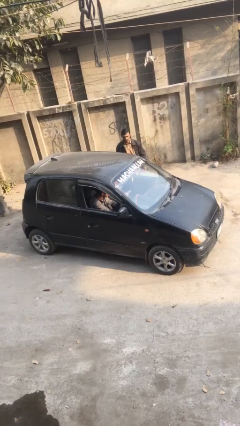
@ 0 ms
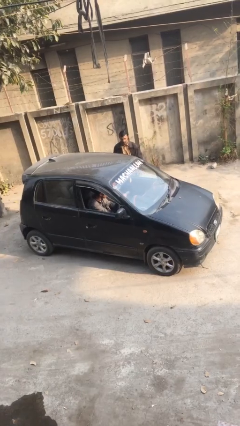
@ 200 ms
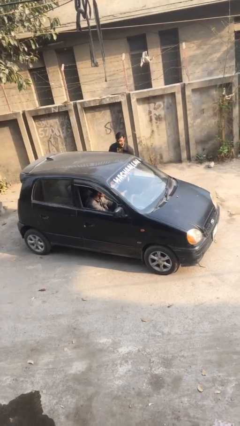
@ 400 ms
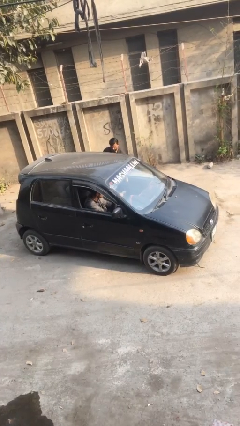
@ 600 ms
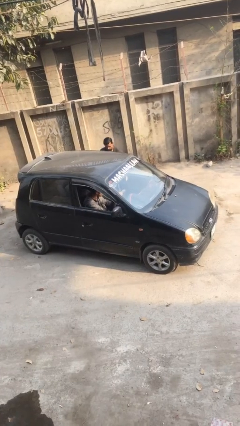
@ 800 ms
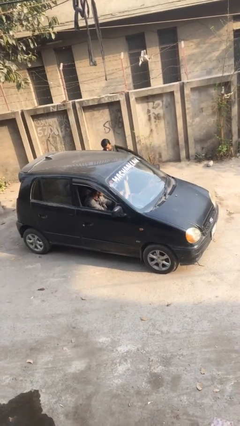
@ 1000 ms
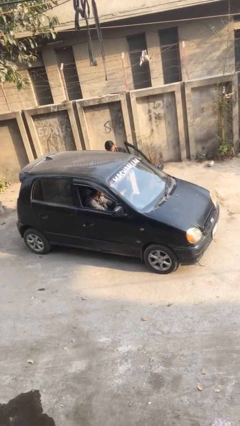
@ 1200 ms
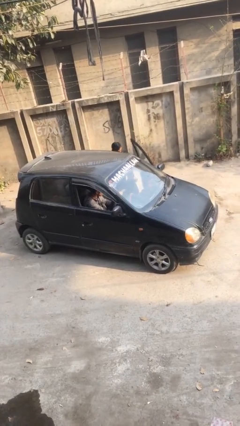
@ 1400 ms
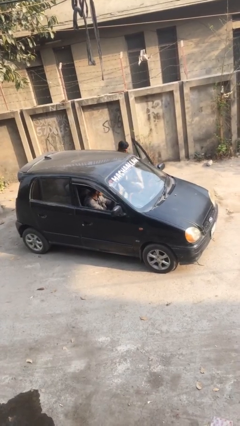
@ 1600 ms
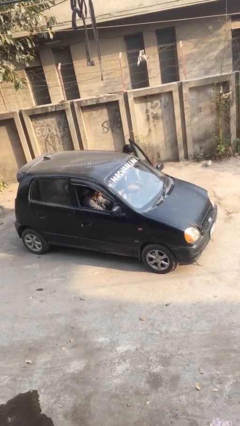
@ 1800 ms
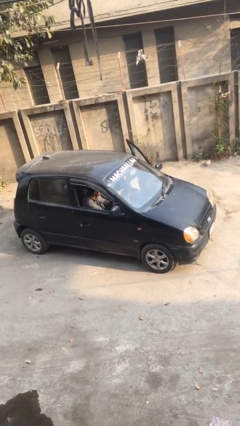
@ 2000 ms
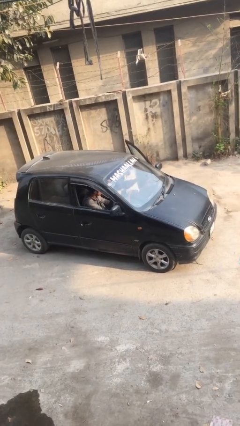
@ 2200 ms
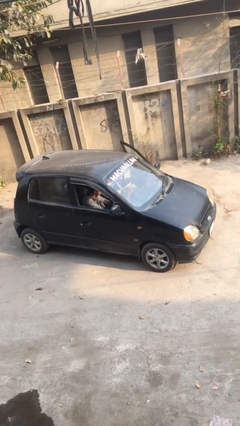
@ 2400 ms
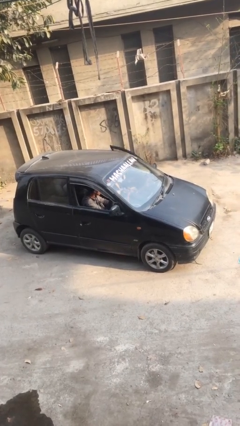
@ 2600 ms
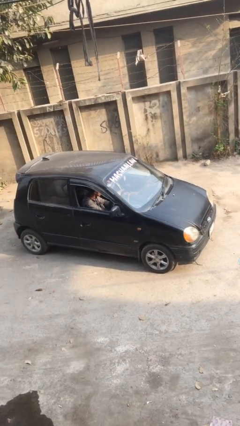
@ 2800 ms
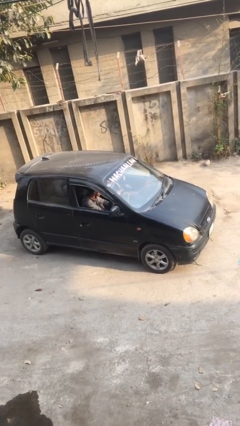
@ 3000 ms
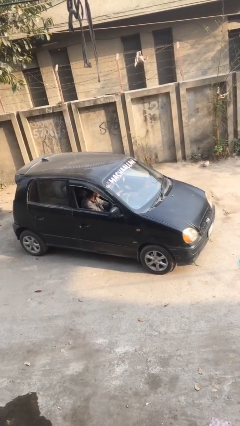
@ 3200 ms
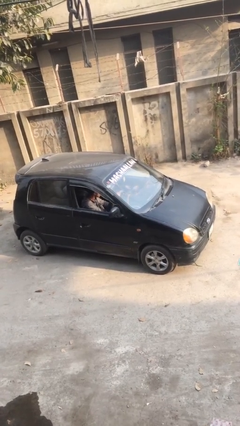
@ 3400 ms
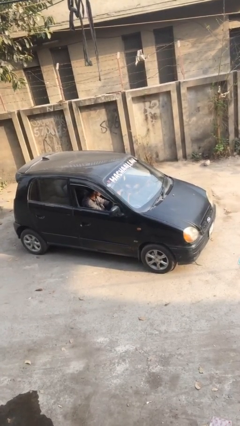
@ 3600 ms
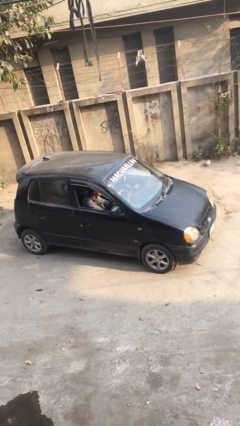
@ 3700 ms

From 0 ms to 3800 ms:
car picks up person

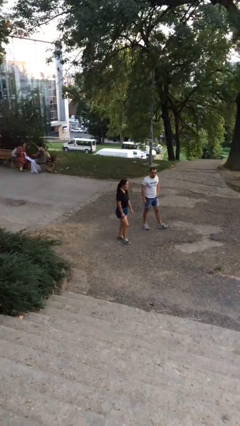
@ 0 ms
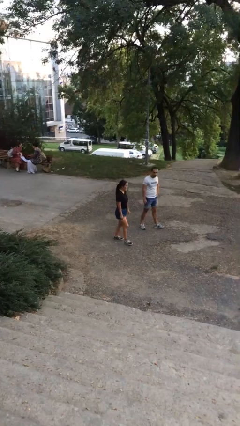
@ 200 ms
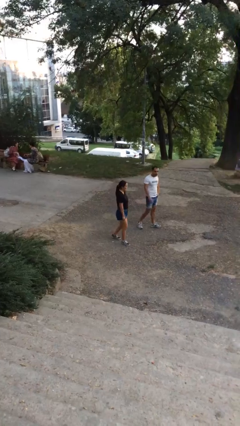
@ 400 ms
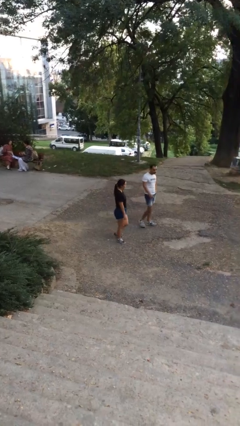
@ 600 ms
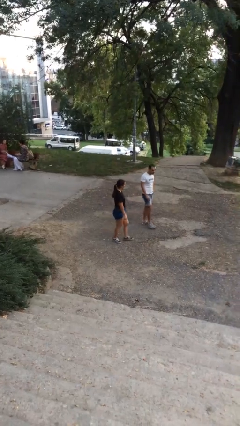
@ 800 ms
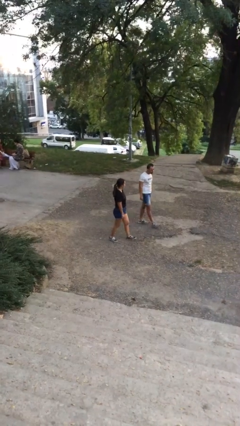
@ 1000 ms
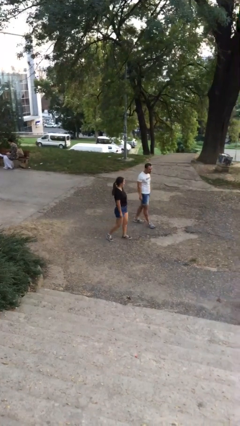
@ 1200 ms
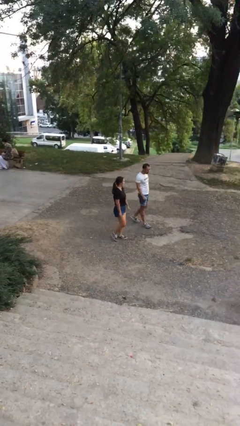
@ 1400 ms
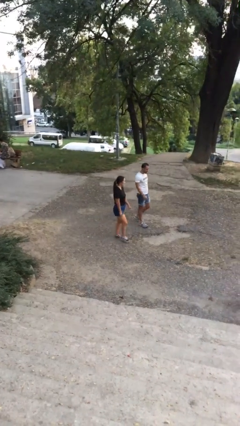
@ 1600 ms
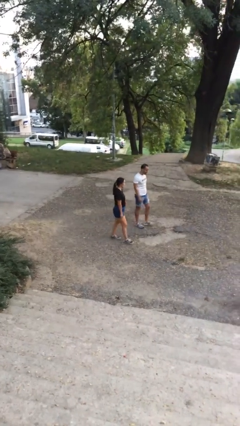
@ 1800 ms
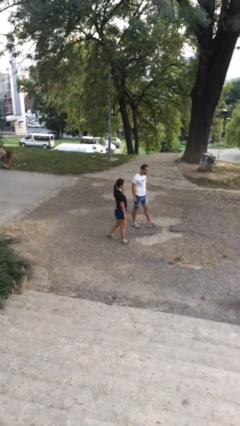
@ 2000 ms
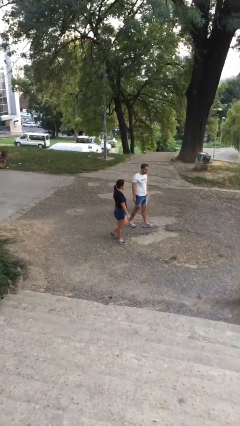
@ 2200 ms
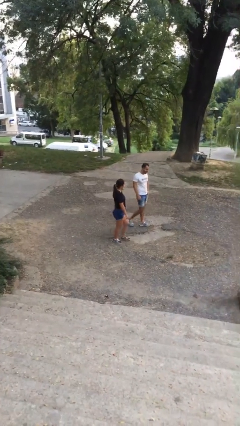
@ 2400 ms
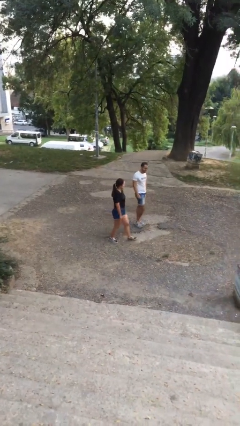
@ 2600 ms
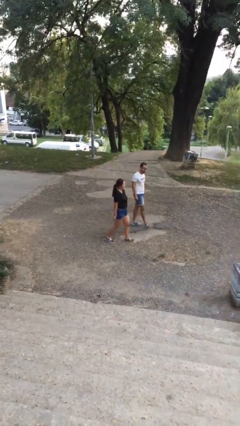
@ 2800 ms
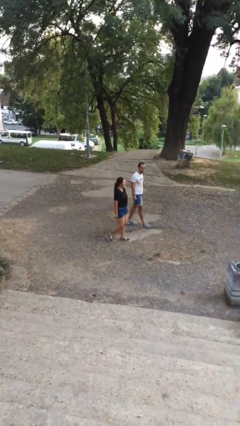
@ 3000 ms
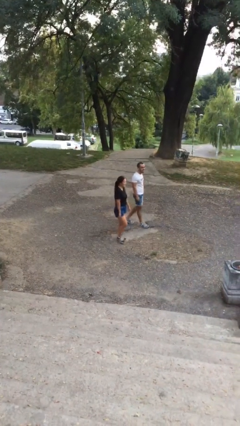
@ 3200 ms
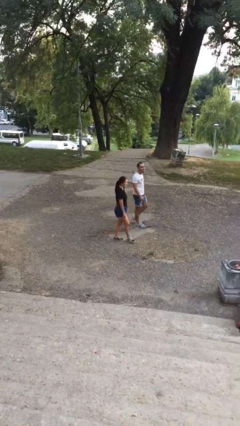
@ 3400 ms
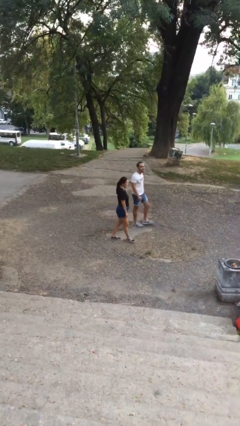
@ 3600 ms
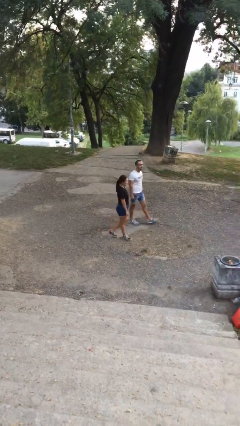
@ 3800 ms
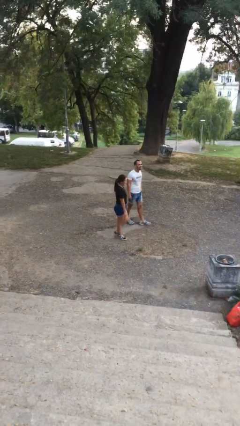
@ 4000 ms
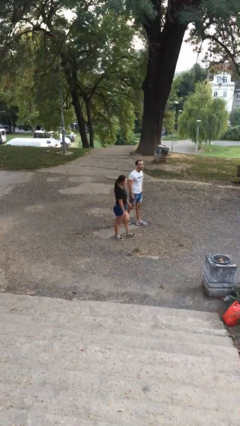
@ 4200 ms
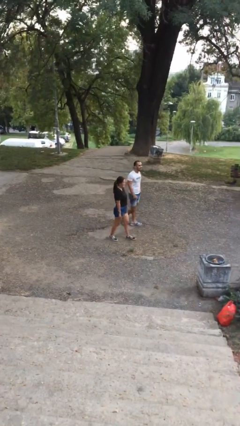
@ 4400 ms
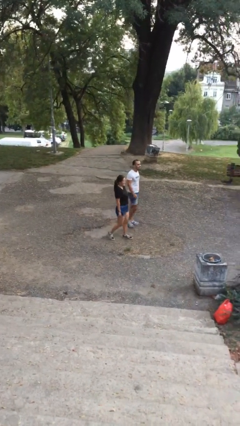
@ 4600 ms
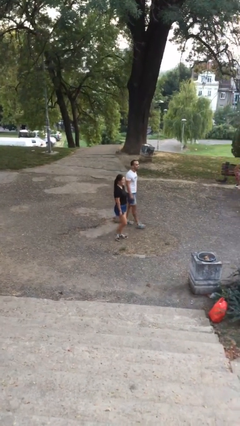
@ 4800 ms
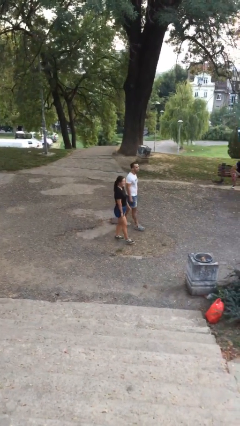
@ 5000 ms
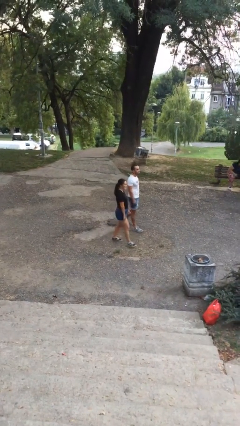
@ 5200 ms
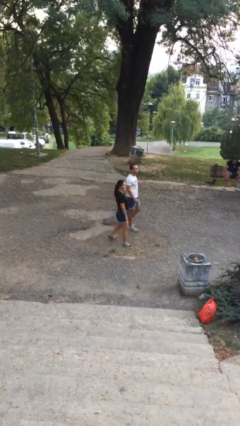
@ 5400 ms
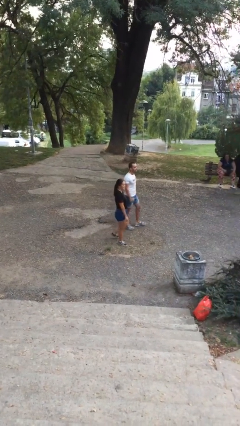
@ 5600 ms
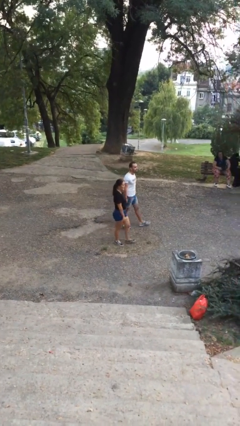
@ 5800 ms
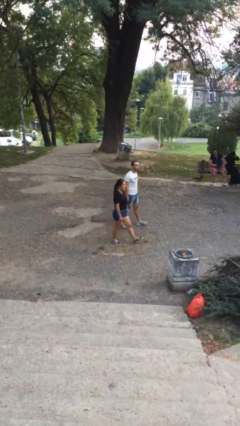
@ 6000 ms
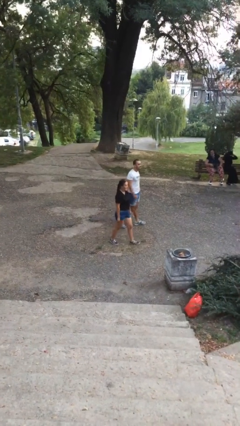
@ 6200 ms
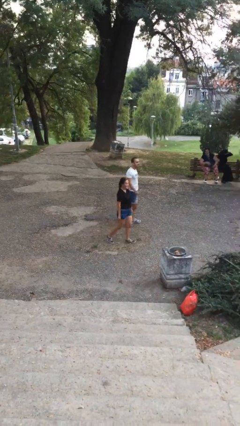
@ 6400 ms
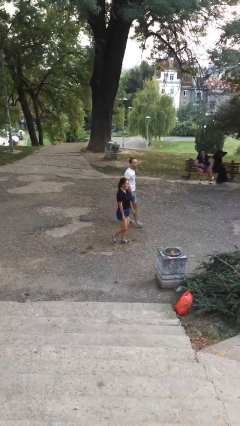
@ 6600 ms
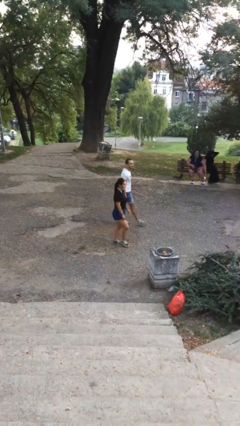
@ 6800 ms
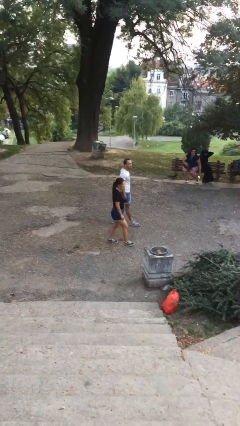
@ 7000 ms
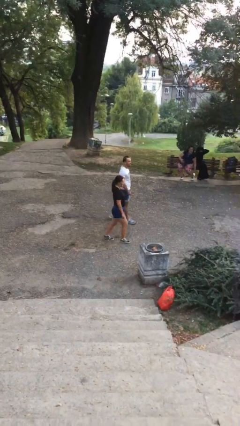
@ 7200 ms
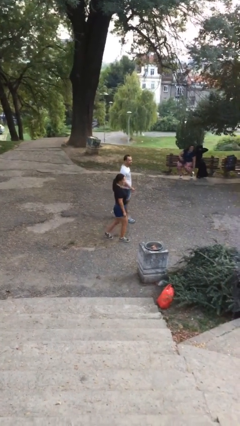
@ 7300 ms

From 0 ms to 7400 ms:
person talks to person

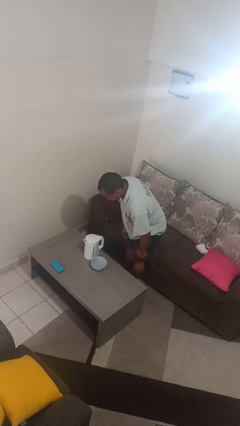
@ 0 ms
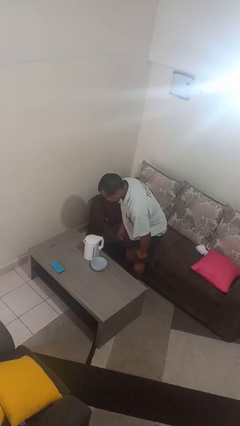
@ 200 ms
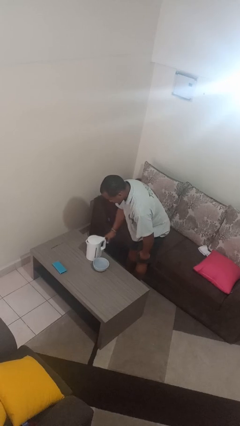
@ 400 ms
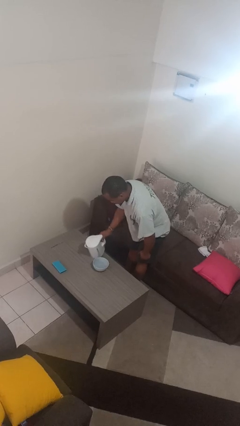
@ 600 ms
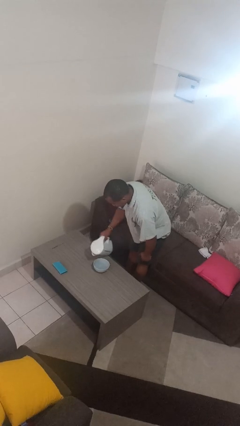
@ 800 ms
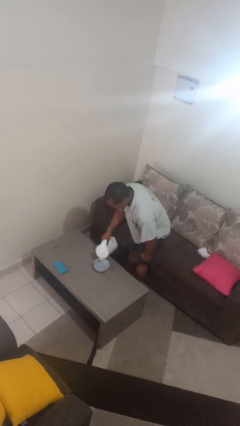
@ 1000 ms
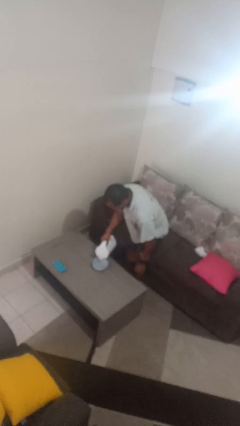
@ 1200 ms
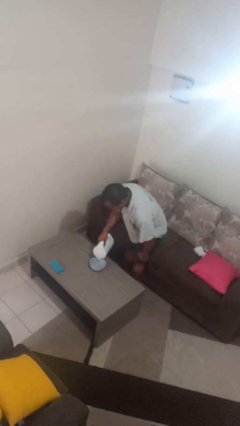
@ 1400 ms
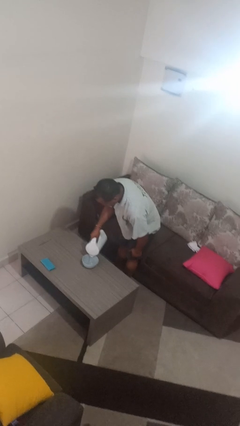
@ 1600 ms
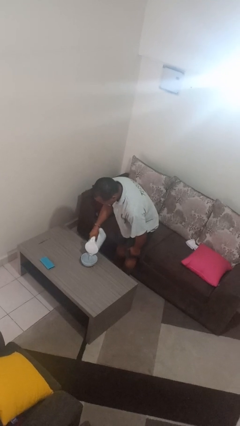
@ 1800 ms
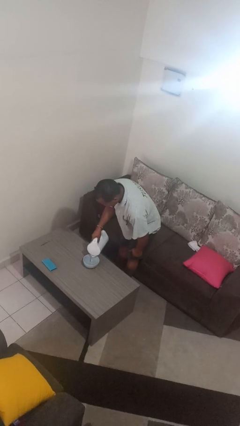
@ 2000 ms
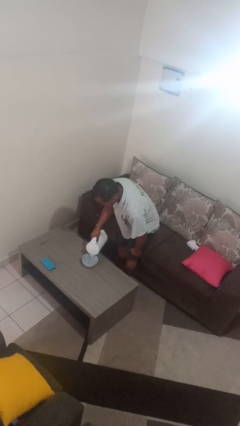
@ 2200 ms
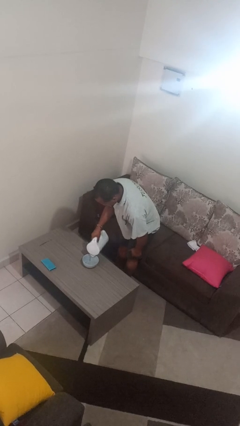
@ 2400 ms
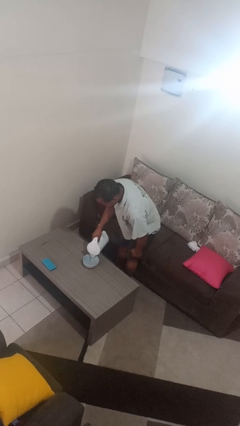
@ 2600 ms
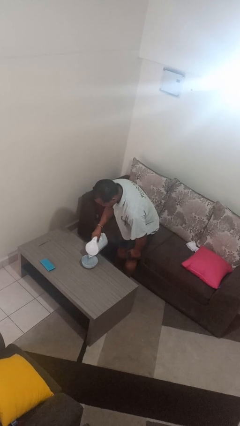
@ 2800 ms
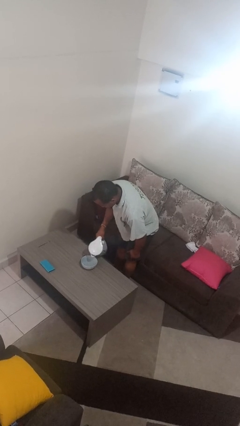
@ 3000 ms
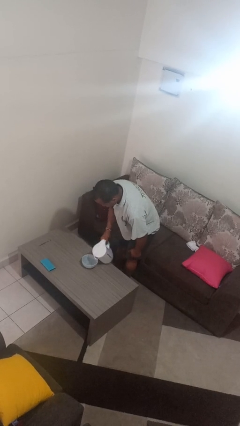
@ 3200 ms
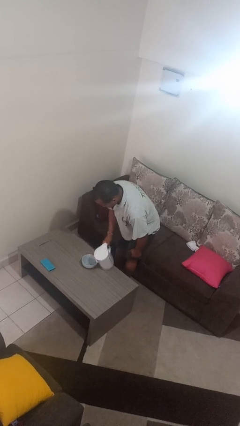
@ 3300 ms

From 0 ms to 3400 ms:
person pours into bowl

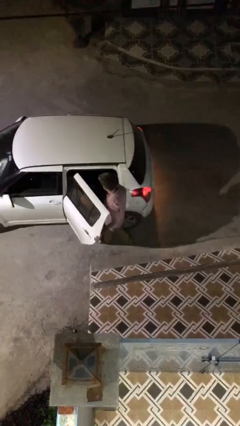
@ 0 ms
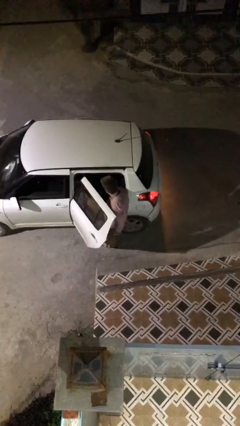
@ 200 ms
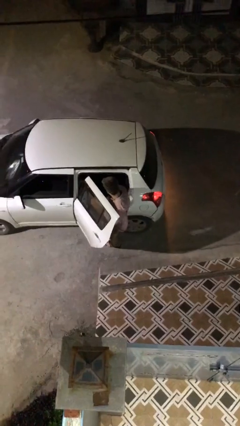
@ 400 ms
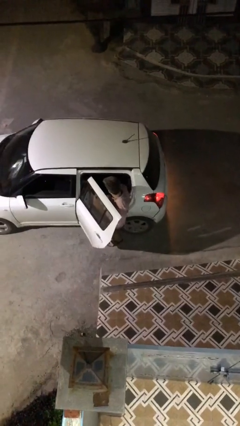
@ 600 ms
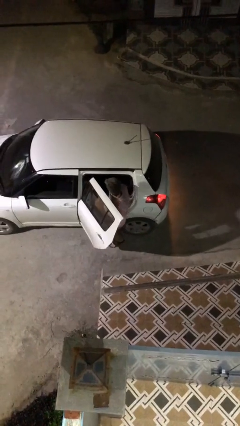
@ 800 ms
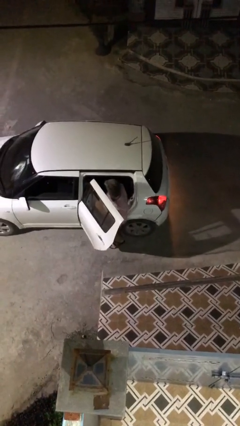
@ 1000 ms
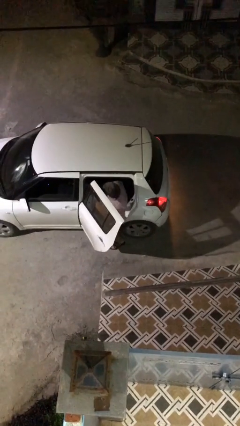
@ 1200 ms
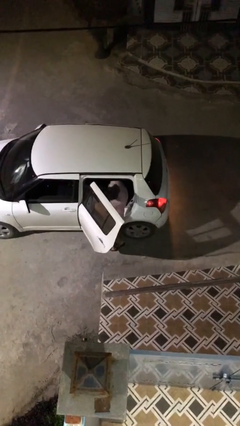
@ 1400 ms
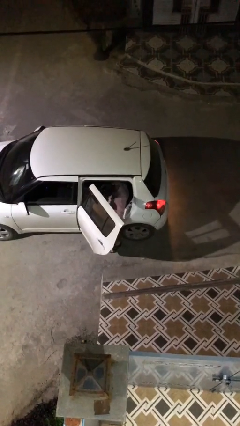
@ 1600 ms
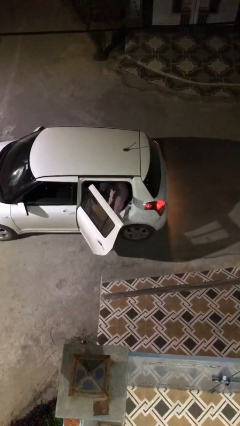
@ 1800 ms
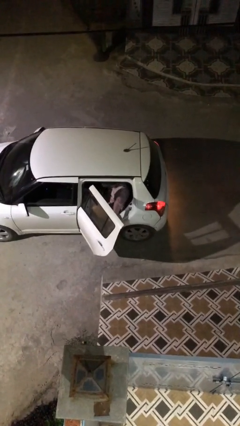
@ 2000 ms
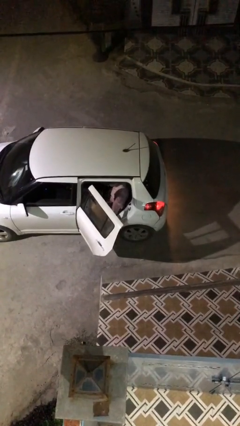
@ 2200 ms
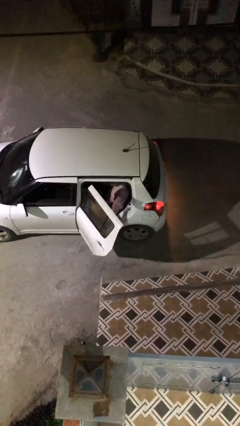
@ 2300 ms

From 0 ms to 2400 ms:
person enters car

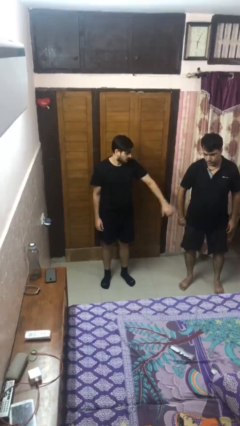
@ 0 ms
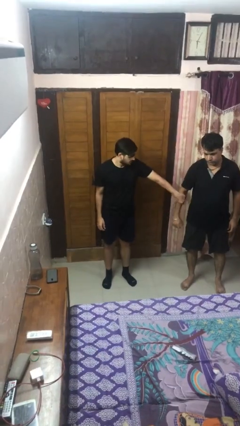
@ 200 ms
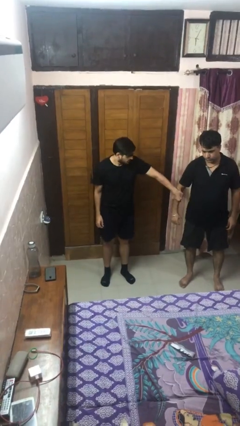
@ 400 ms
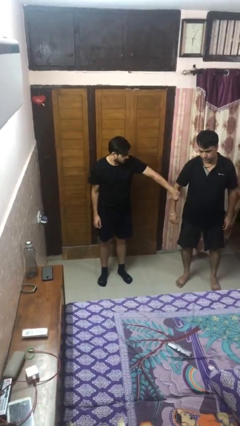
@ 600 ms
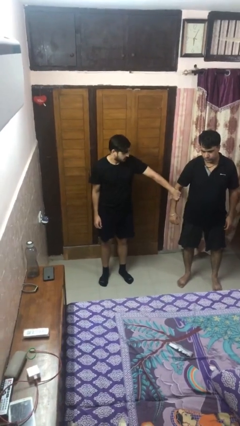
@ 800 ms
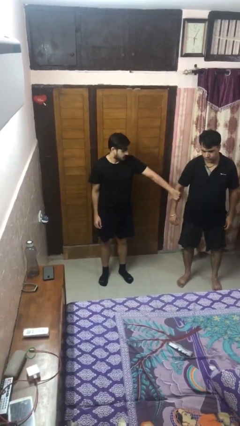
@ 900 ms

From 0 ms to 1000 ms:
person grabs person by forearm
